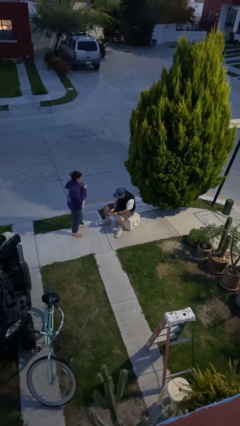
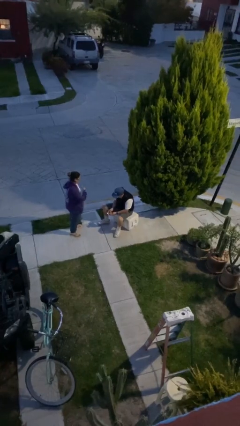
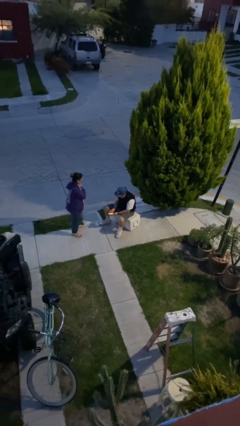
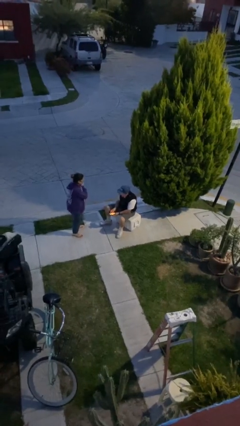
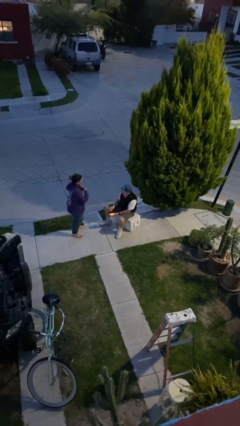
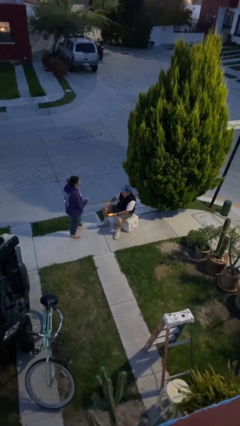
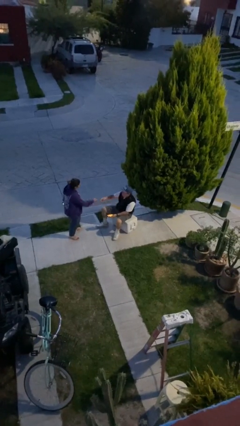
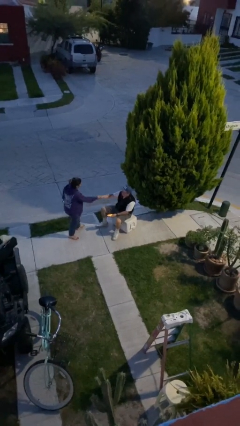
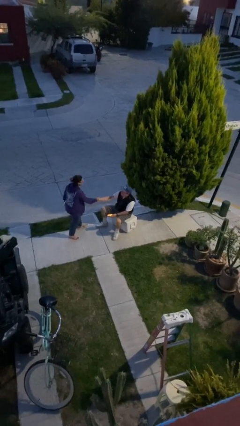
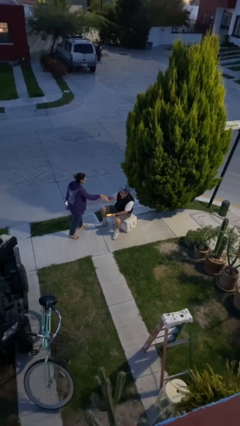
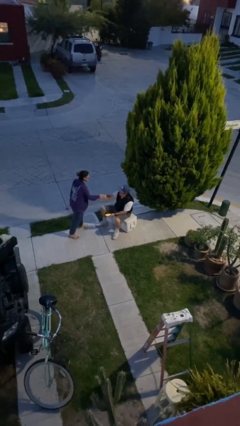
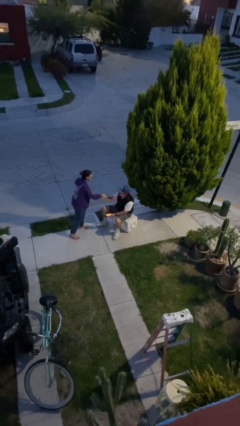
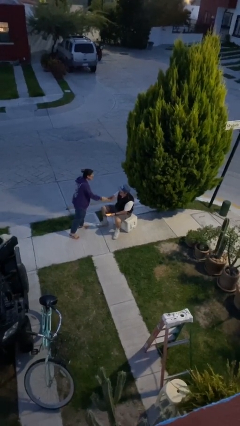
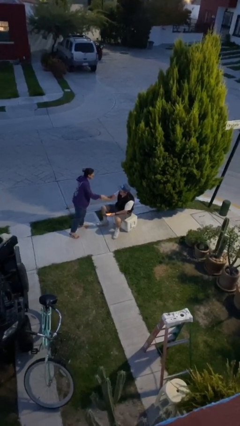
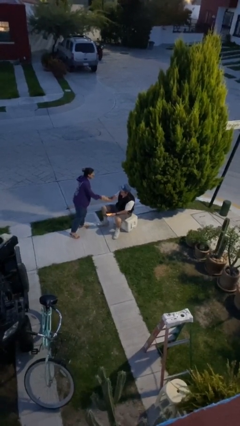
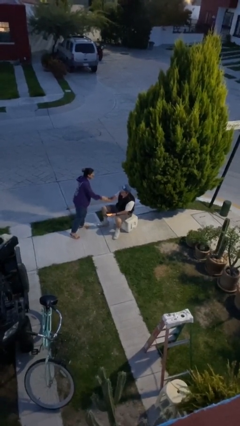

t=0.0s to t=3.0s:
person shakes hand

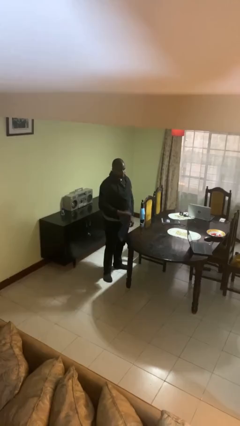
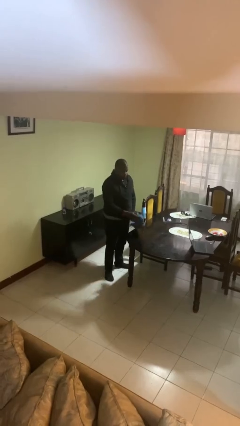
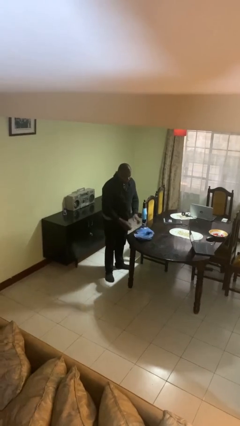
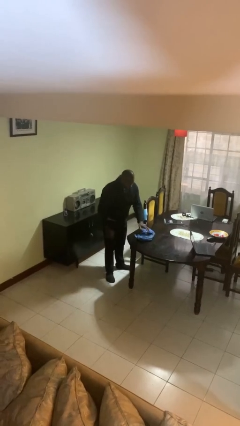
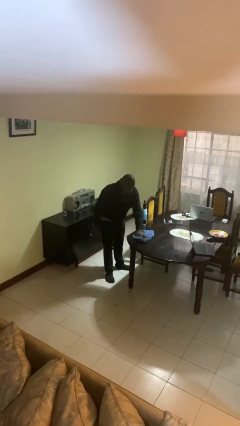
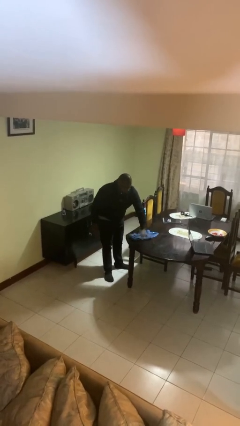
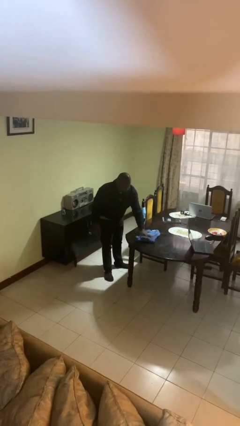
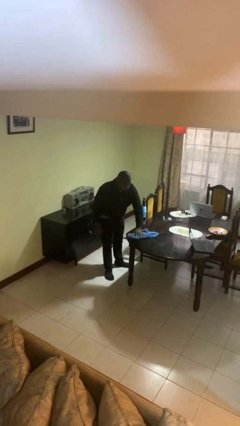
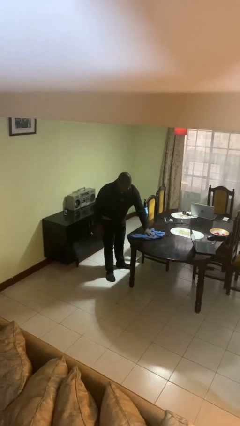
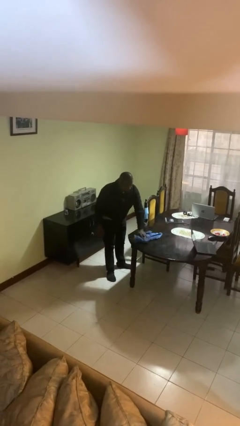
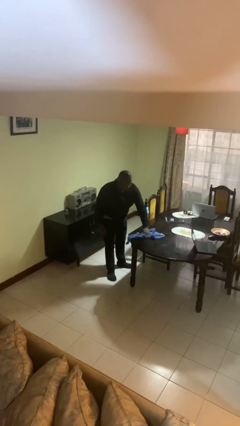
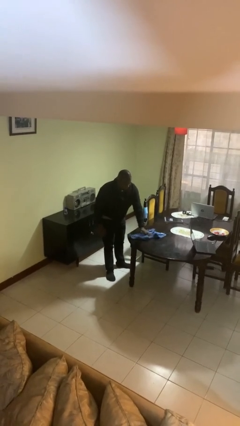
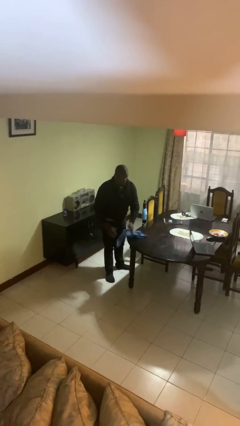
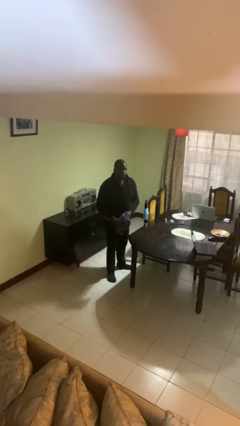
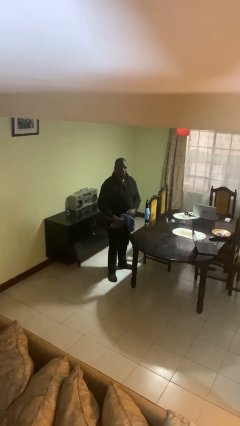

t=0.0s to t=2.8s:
person cleans table with rag

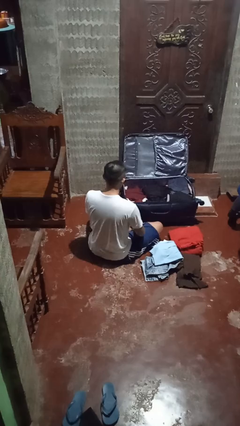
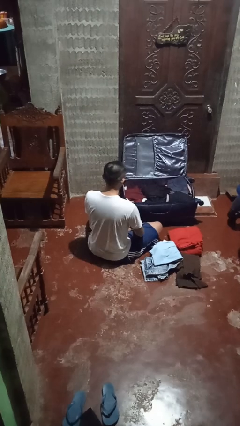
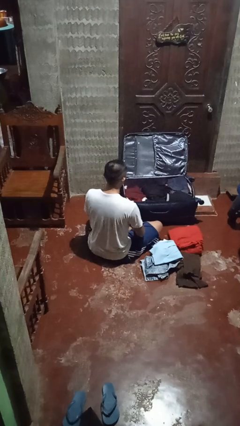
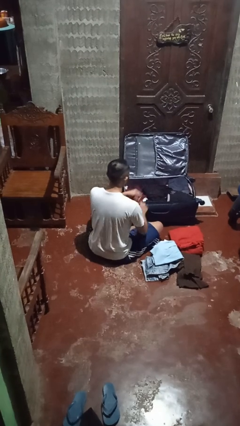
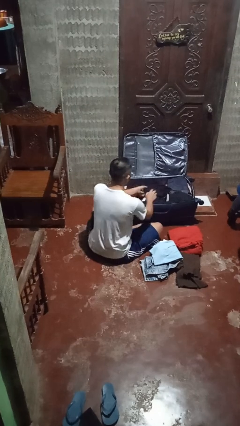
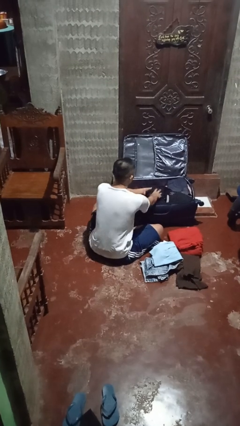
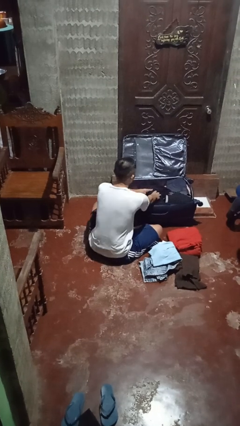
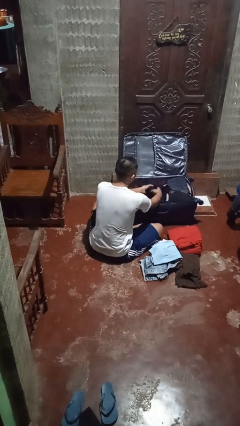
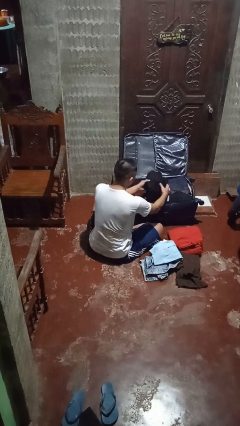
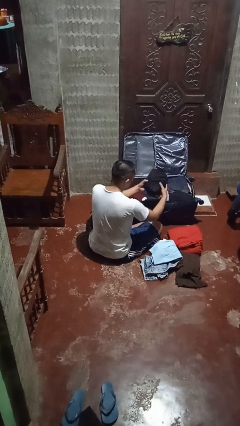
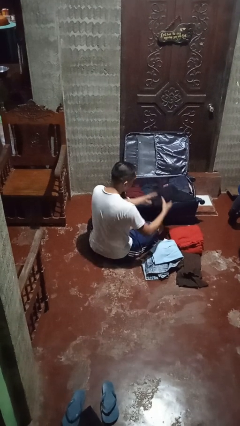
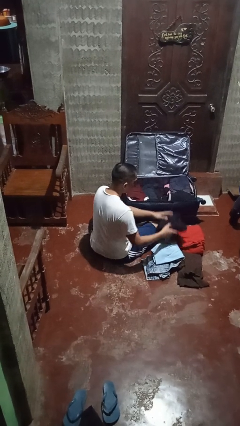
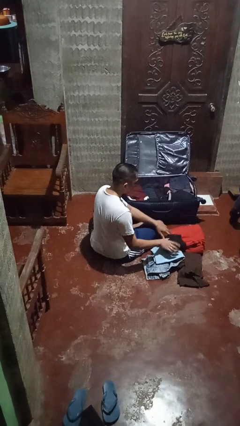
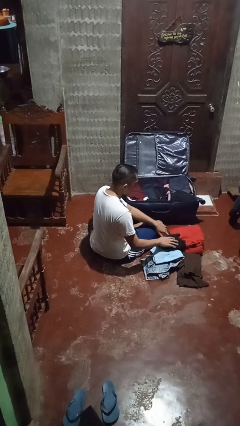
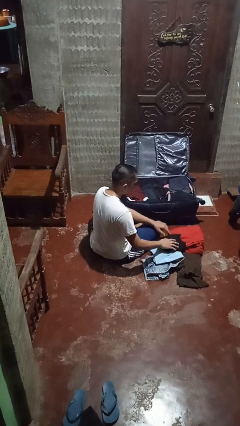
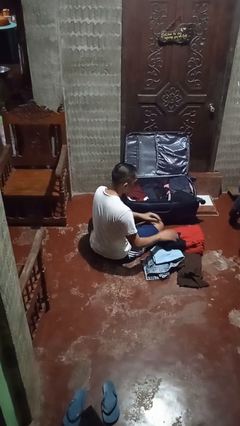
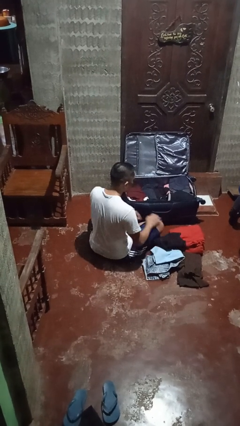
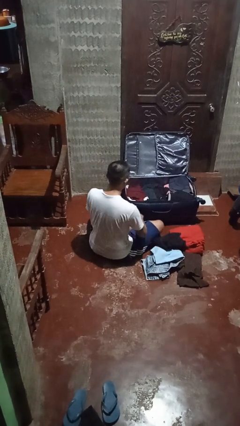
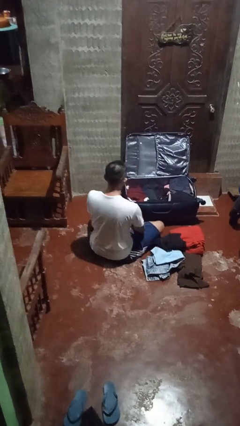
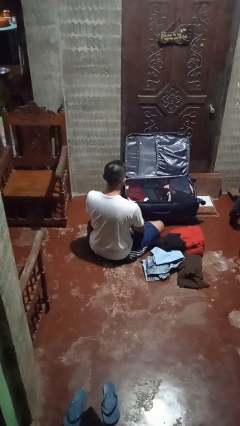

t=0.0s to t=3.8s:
person unloads clothes from suitcase

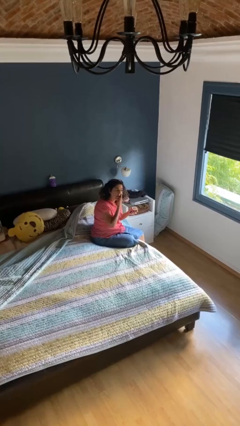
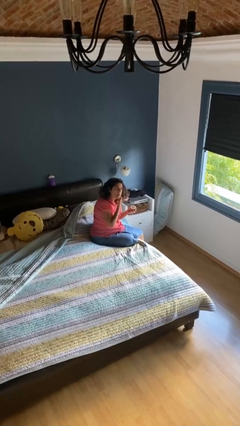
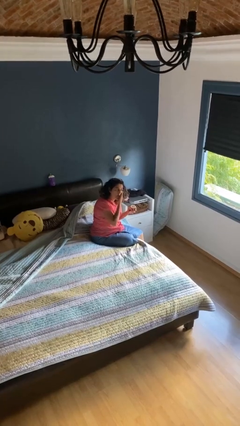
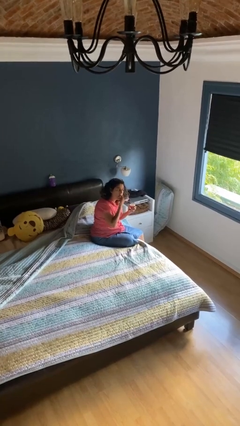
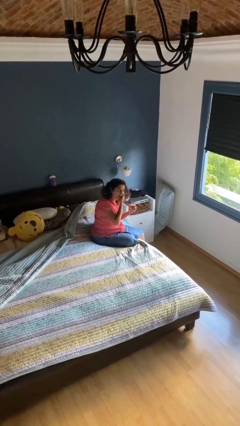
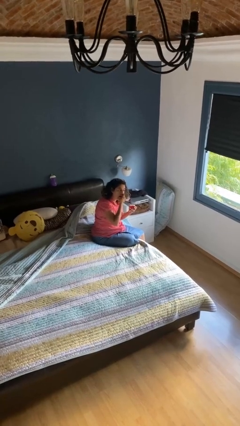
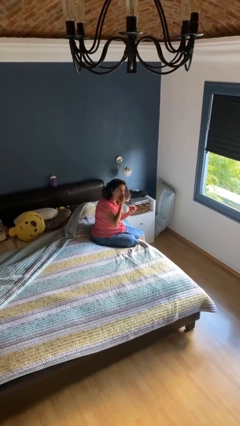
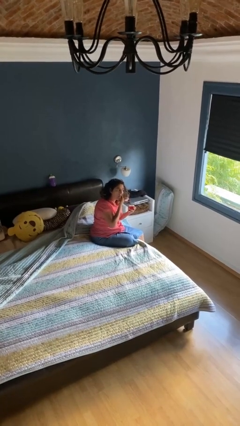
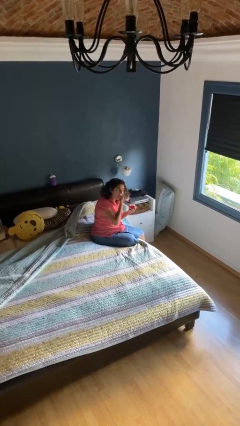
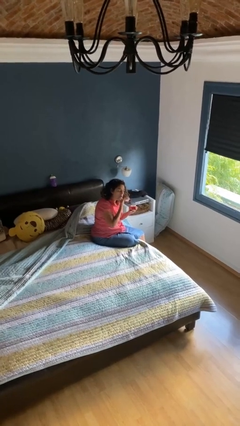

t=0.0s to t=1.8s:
person applies facial moisturizer

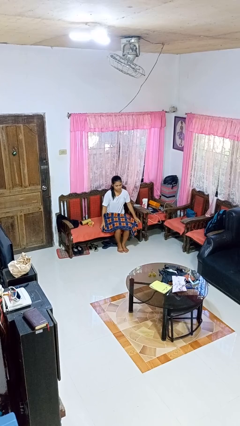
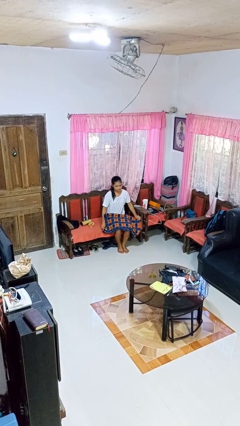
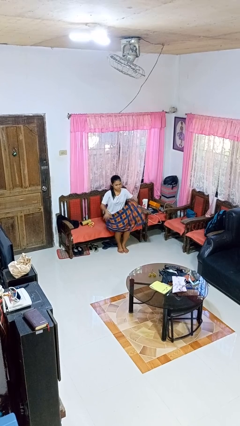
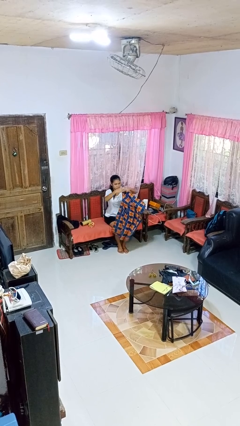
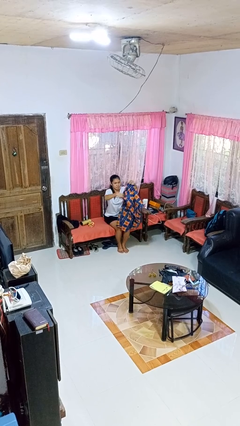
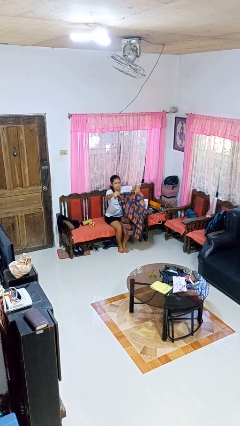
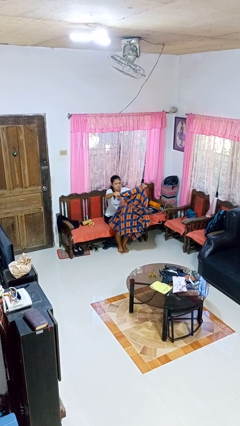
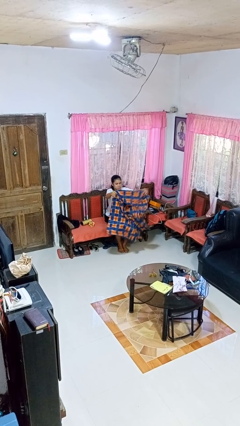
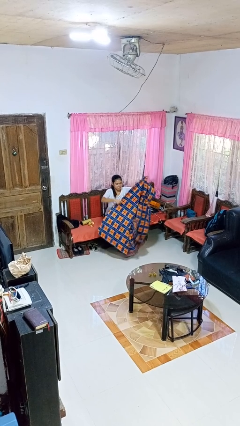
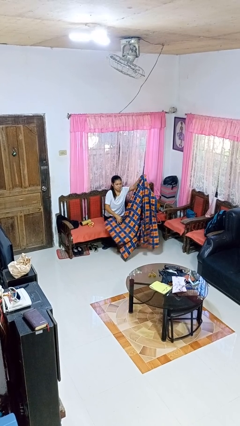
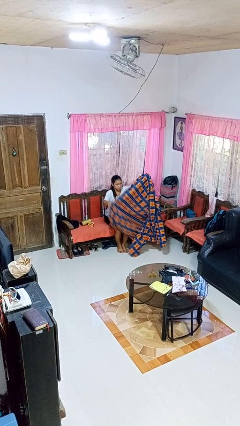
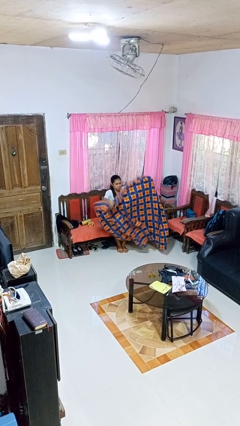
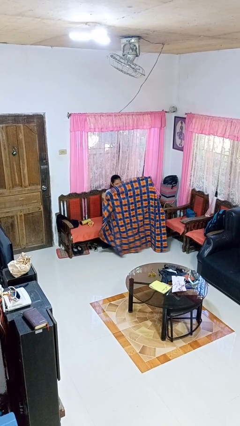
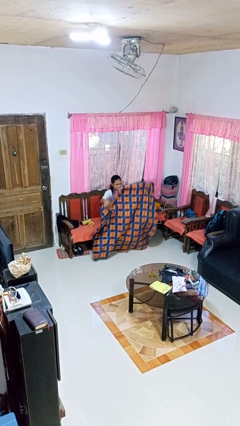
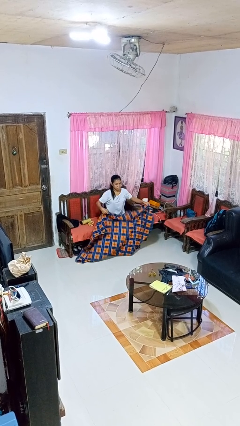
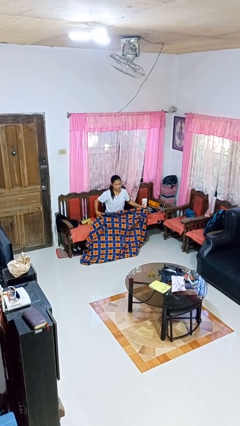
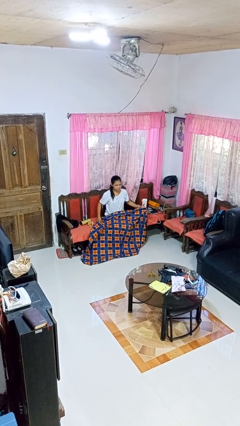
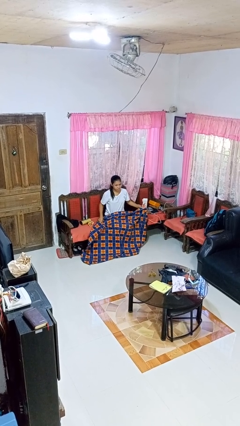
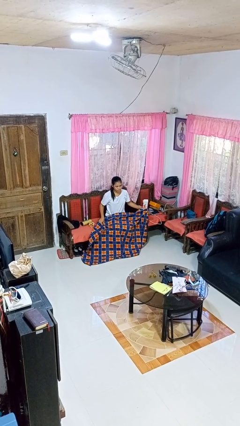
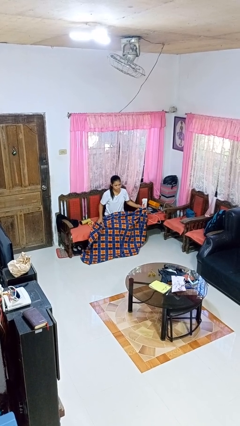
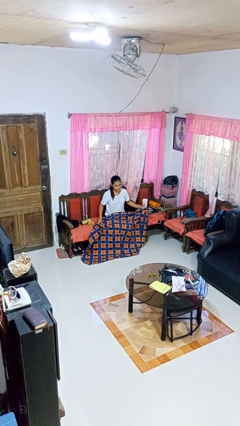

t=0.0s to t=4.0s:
person unfolds blanket

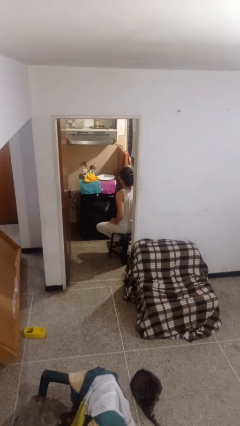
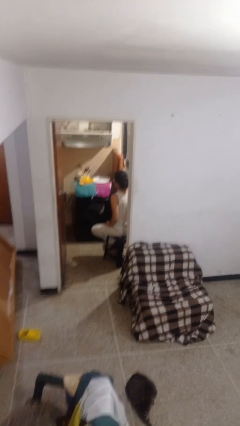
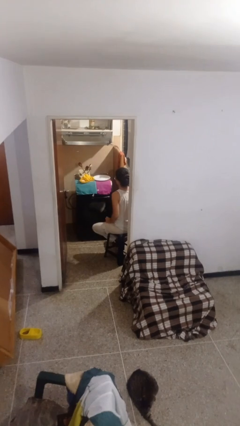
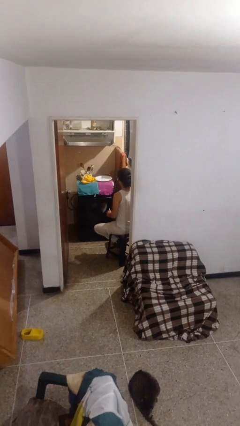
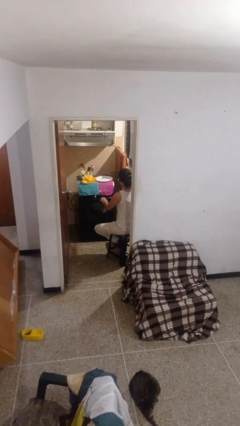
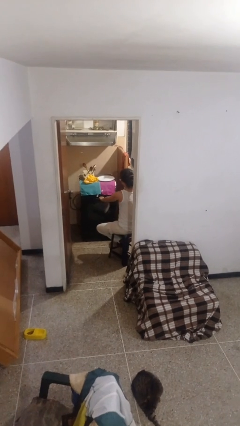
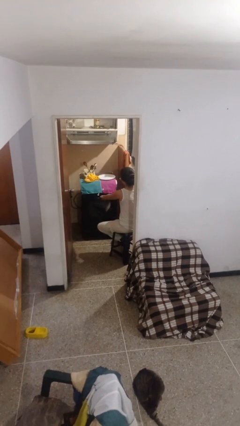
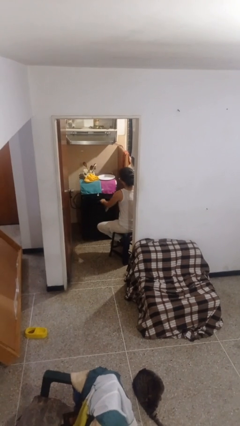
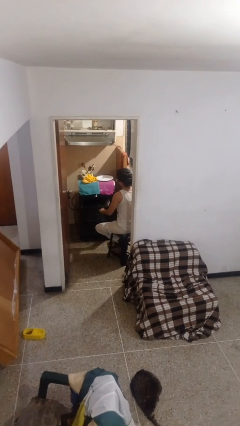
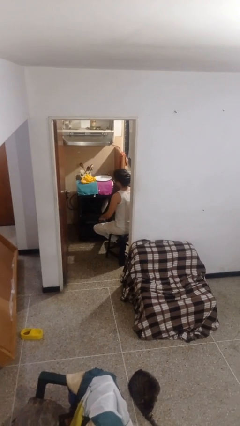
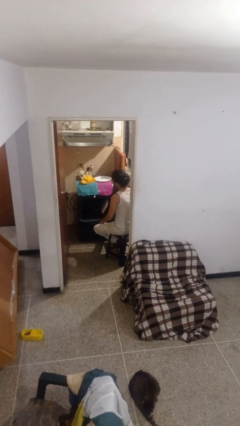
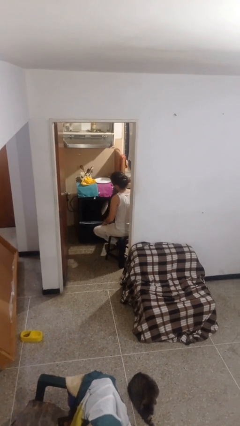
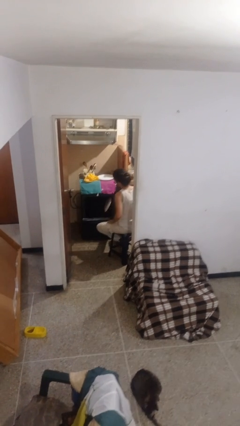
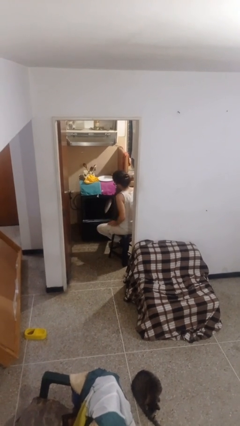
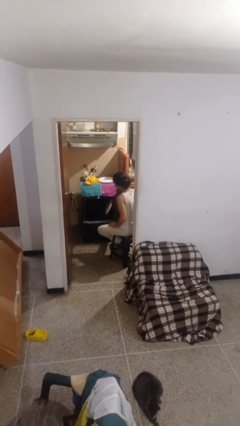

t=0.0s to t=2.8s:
person opens dishwasher
